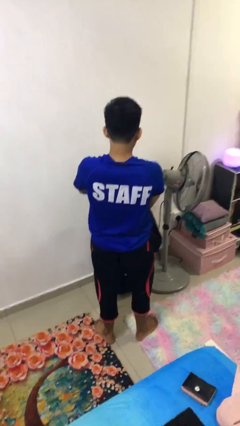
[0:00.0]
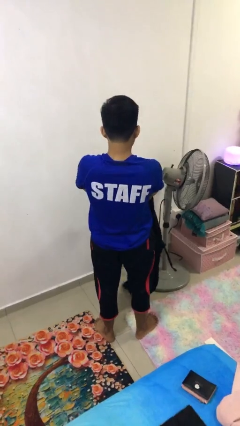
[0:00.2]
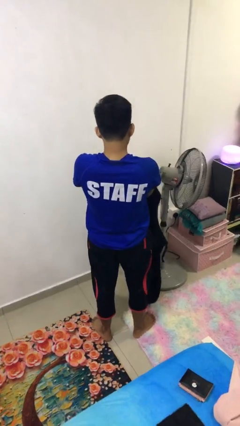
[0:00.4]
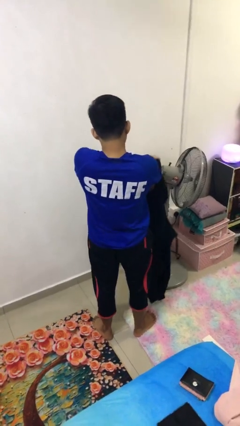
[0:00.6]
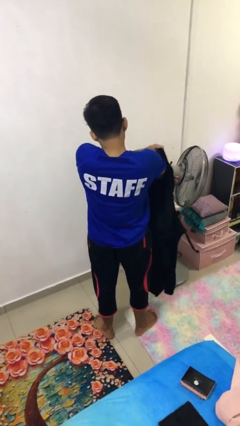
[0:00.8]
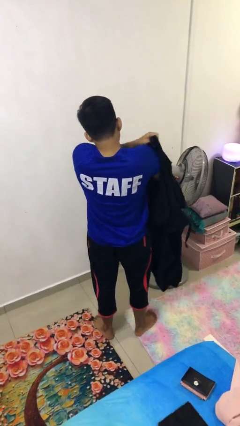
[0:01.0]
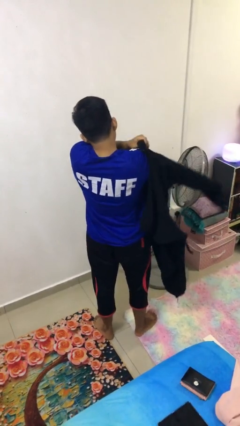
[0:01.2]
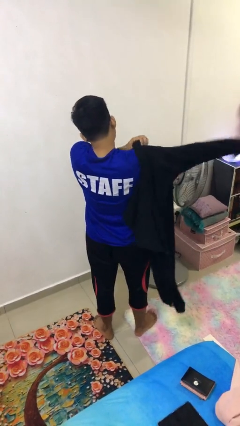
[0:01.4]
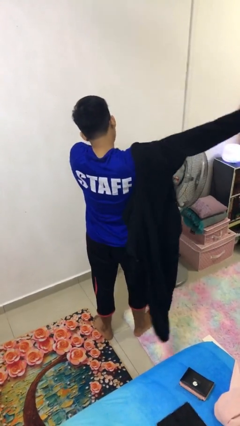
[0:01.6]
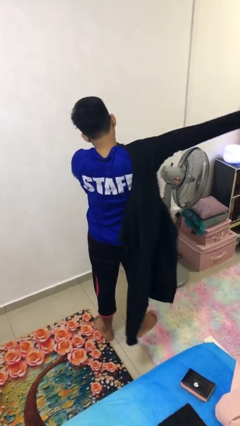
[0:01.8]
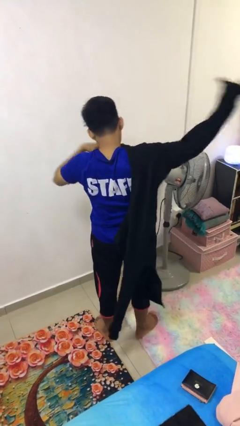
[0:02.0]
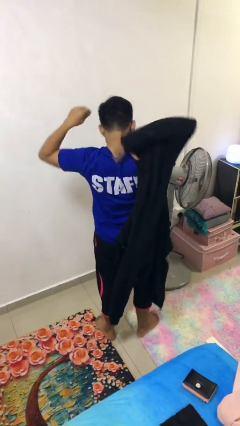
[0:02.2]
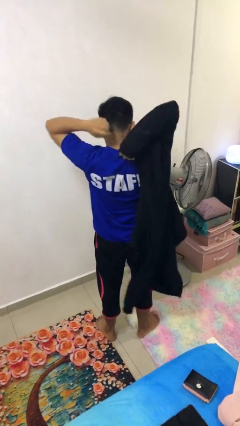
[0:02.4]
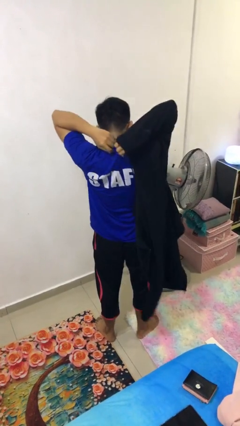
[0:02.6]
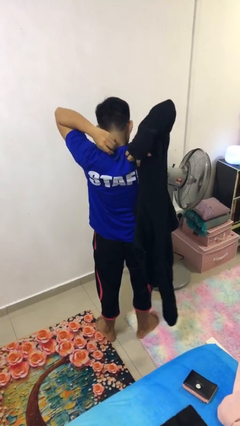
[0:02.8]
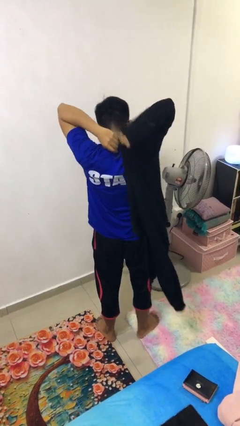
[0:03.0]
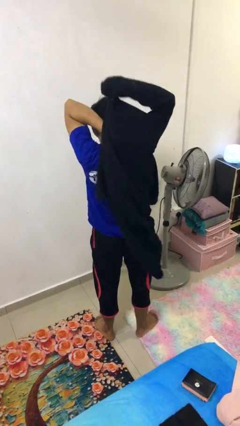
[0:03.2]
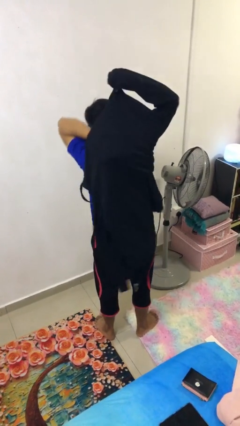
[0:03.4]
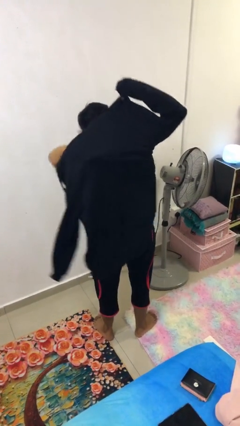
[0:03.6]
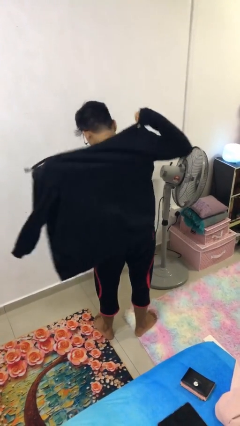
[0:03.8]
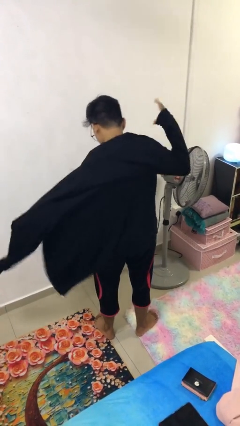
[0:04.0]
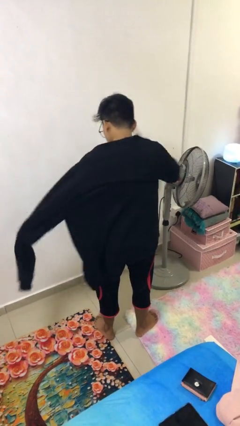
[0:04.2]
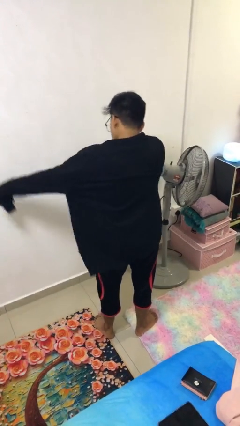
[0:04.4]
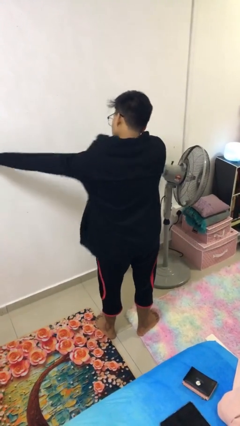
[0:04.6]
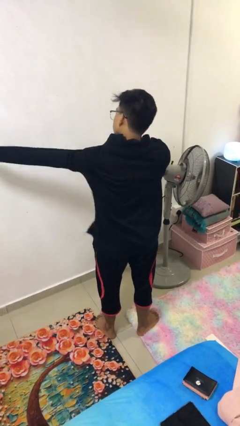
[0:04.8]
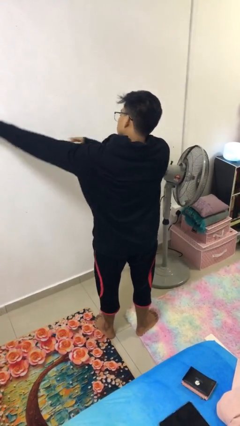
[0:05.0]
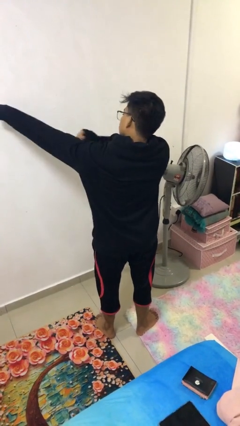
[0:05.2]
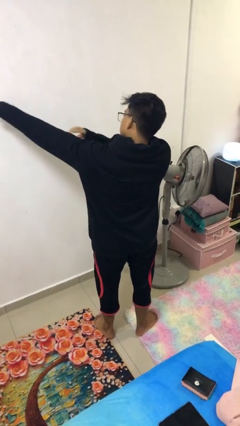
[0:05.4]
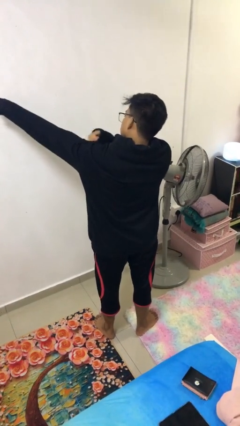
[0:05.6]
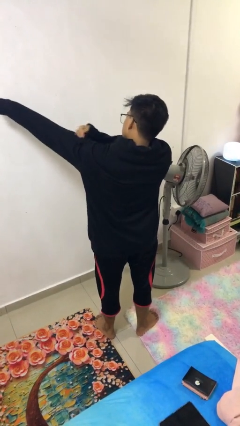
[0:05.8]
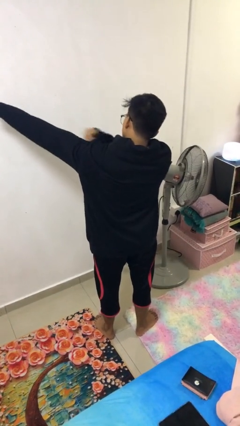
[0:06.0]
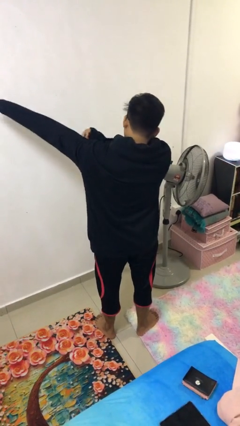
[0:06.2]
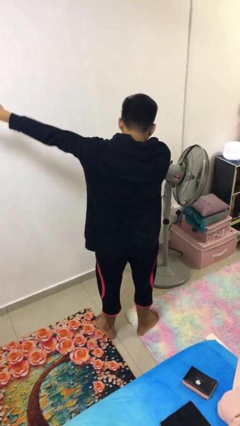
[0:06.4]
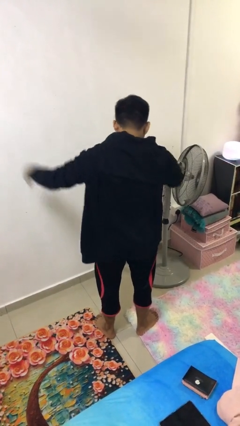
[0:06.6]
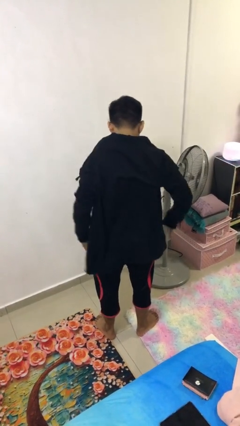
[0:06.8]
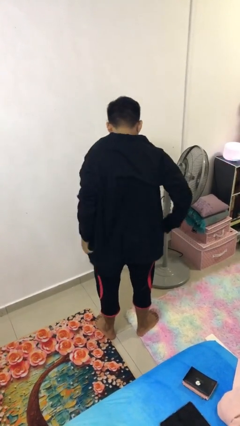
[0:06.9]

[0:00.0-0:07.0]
person puts on jacket

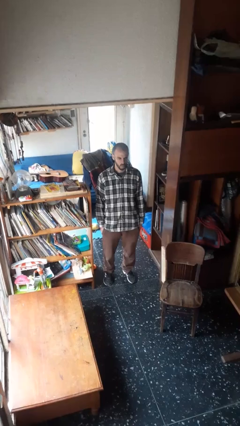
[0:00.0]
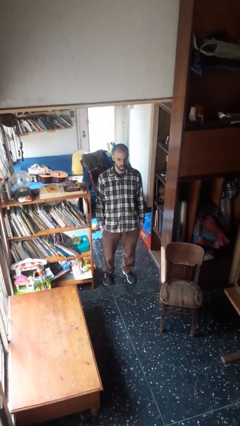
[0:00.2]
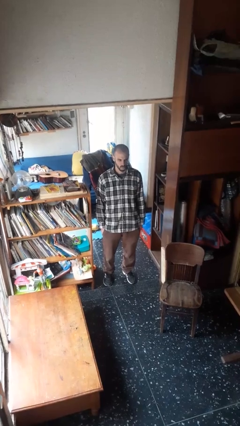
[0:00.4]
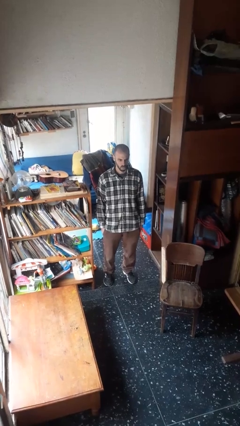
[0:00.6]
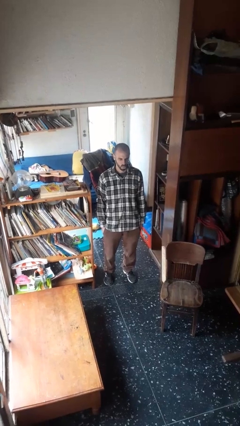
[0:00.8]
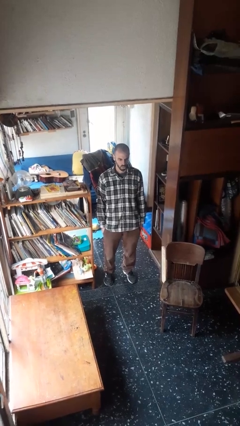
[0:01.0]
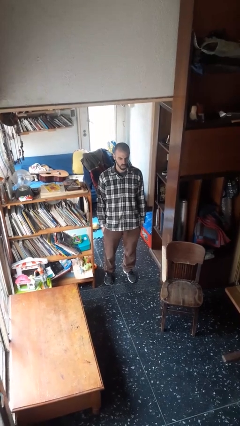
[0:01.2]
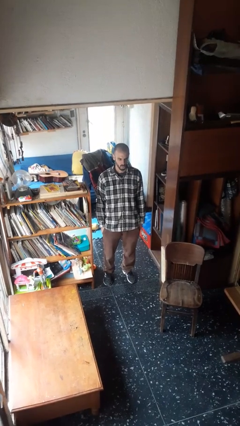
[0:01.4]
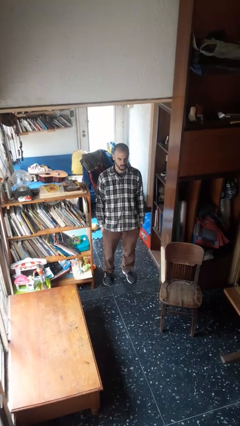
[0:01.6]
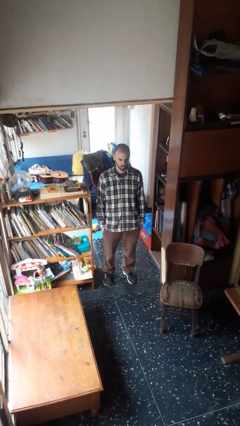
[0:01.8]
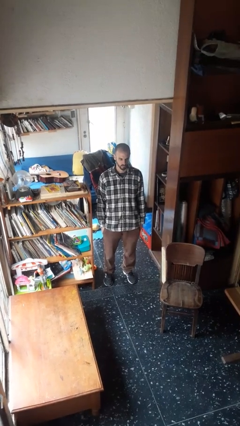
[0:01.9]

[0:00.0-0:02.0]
person sticks out tongue

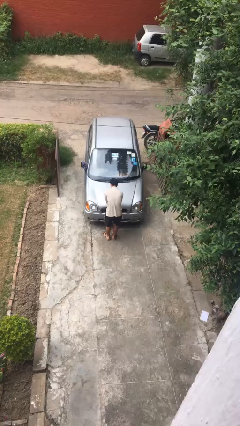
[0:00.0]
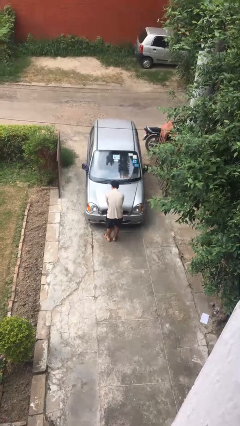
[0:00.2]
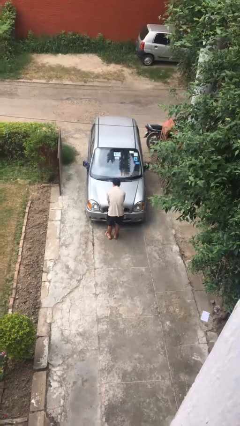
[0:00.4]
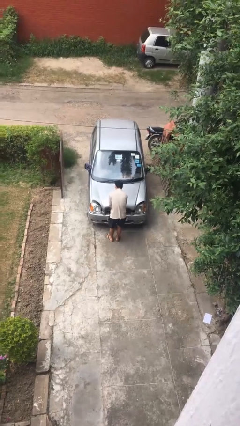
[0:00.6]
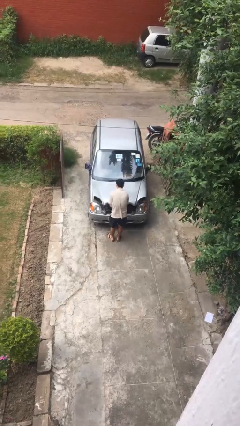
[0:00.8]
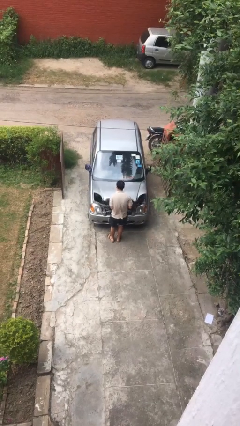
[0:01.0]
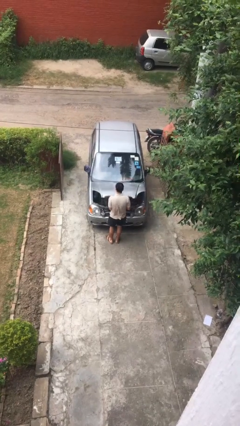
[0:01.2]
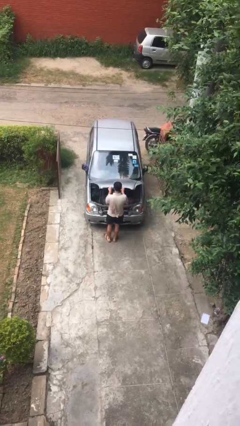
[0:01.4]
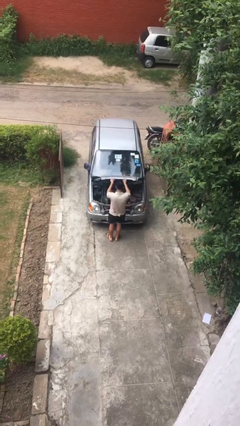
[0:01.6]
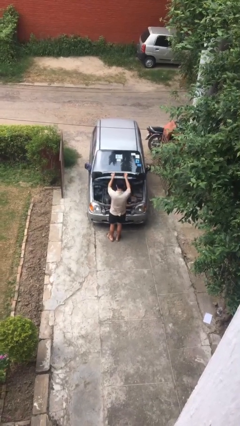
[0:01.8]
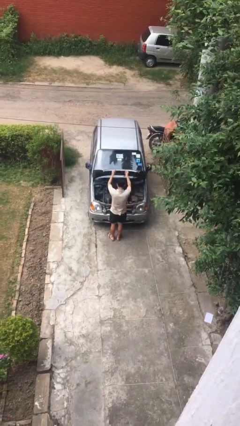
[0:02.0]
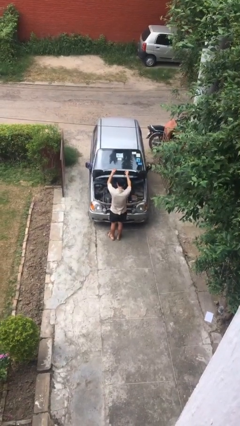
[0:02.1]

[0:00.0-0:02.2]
person opens car hood

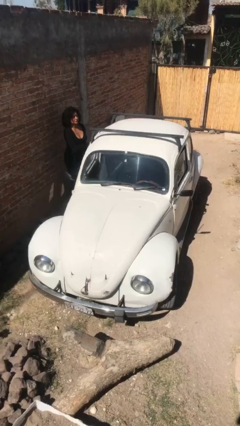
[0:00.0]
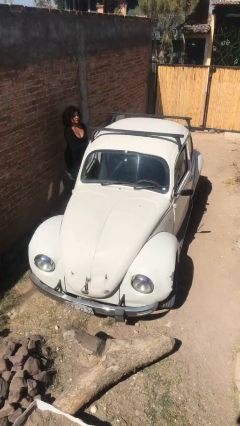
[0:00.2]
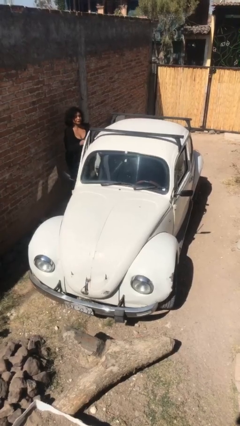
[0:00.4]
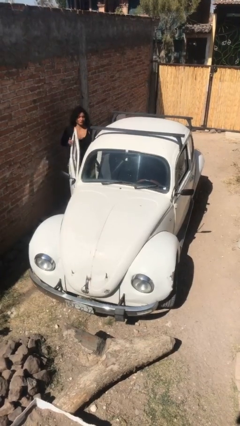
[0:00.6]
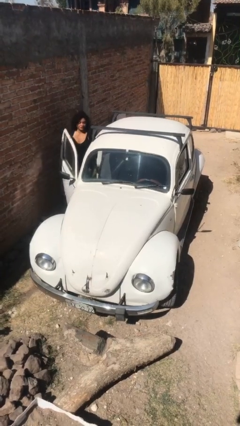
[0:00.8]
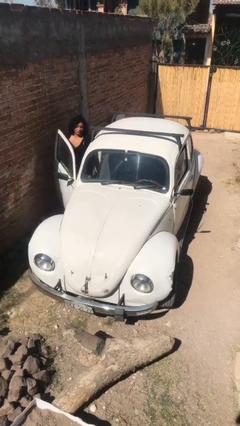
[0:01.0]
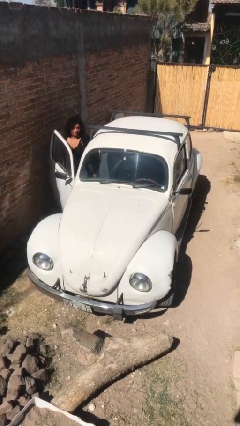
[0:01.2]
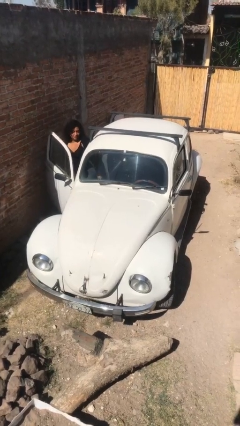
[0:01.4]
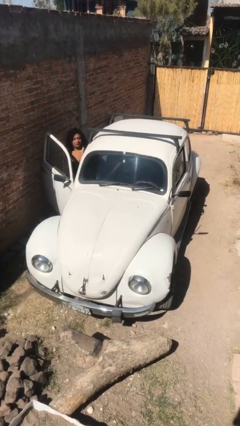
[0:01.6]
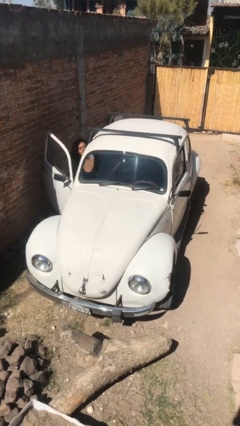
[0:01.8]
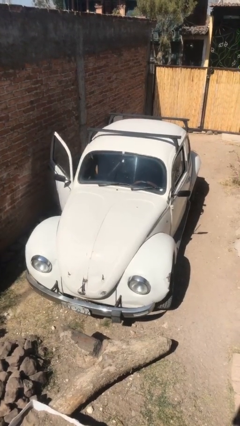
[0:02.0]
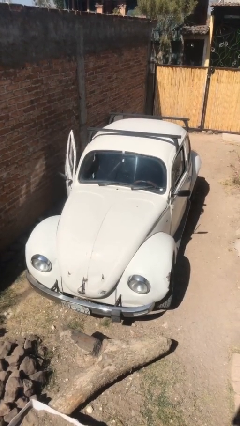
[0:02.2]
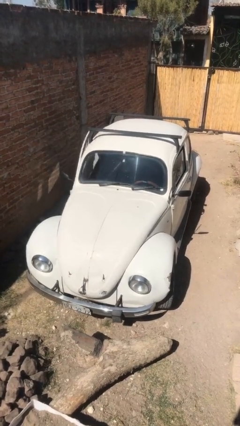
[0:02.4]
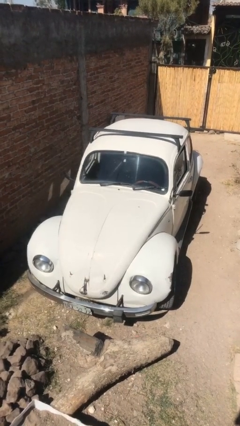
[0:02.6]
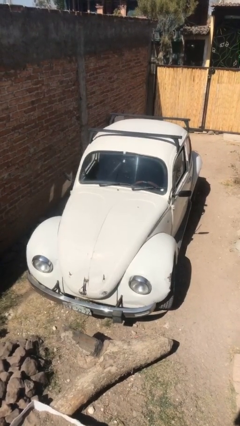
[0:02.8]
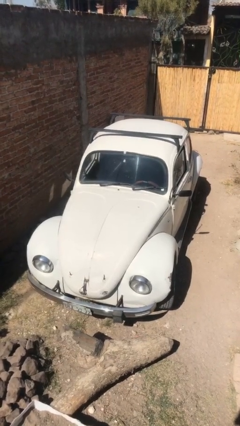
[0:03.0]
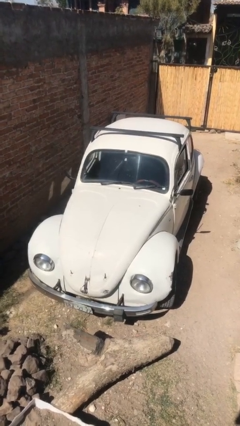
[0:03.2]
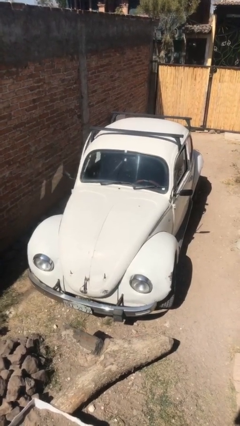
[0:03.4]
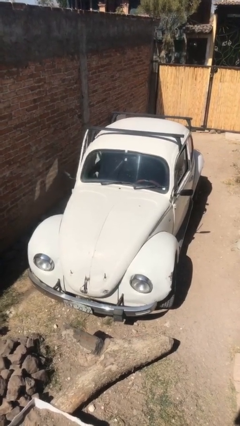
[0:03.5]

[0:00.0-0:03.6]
car picks up person

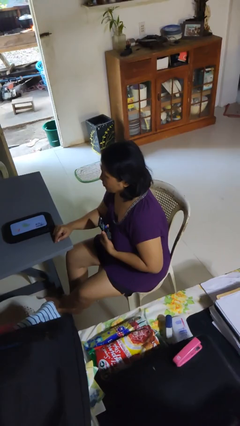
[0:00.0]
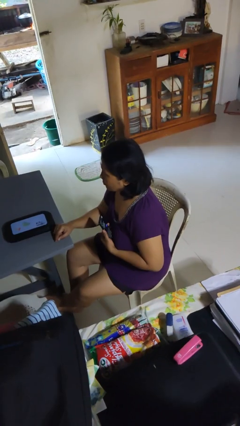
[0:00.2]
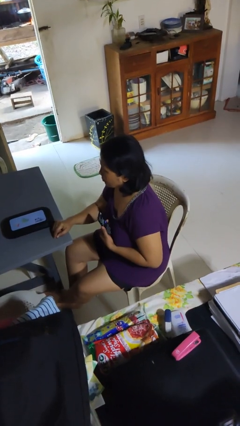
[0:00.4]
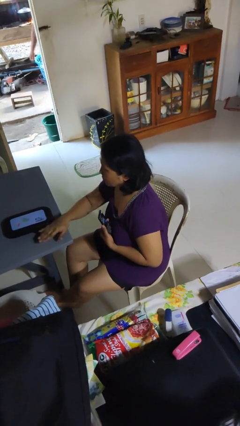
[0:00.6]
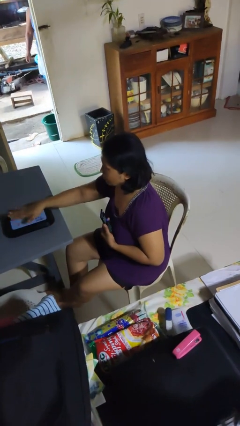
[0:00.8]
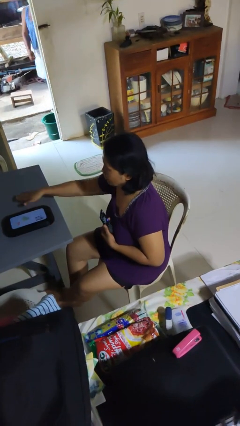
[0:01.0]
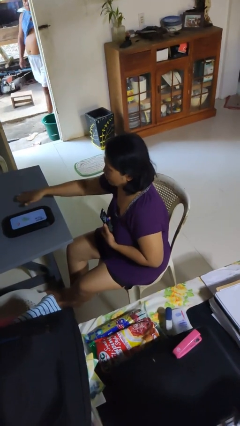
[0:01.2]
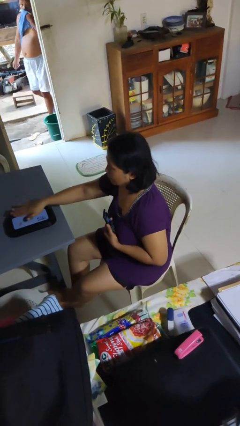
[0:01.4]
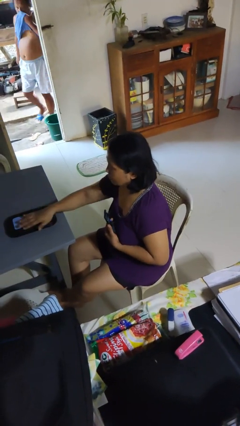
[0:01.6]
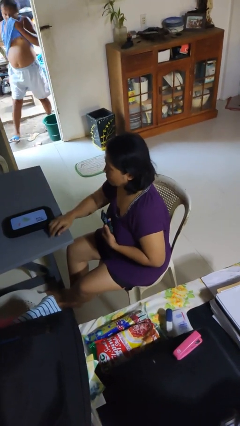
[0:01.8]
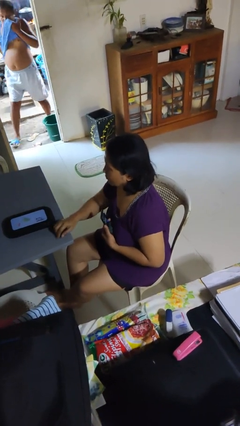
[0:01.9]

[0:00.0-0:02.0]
person waves hand over object

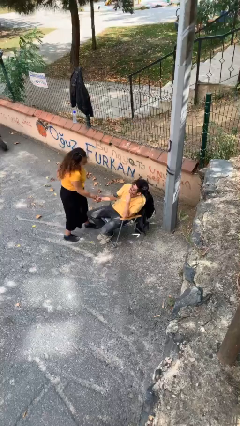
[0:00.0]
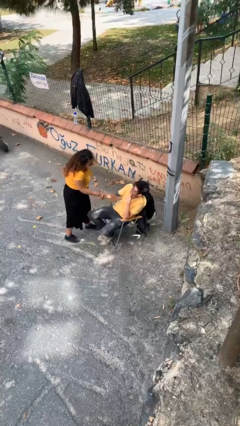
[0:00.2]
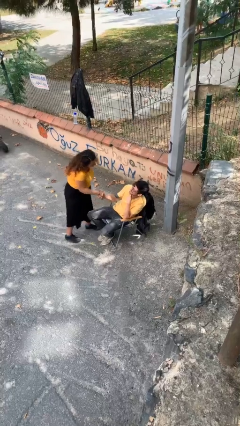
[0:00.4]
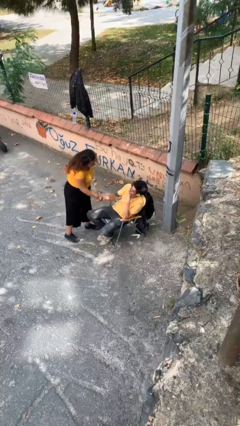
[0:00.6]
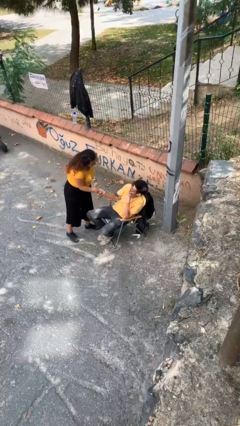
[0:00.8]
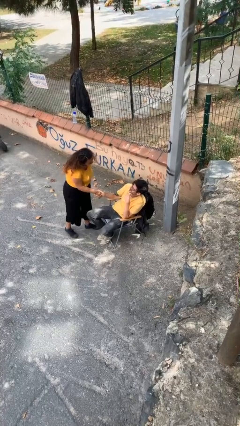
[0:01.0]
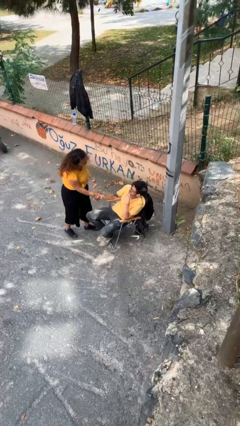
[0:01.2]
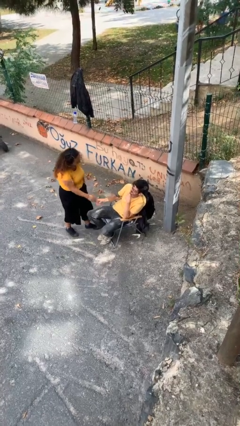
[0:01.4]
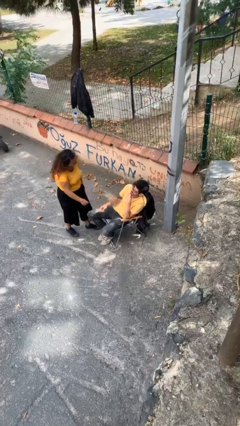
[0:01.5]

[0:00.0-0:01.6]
person shakes hand
